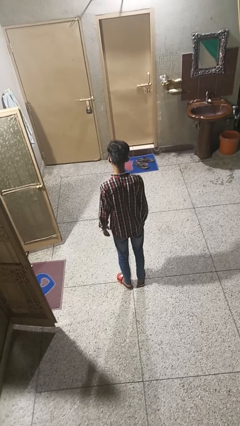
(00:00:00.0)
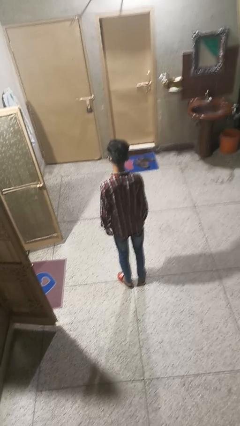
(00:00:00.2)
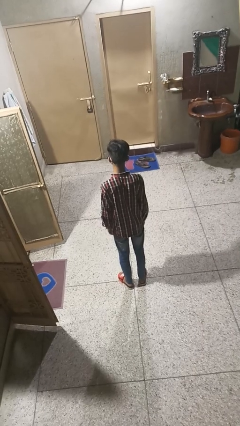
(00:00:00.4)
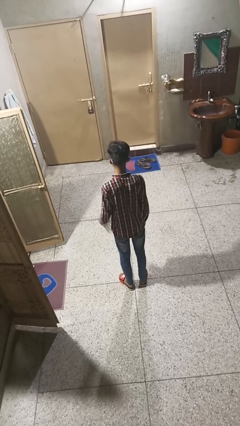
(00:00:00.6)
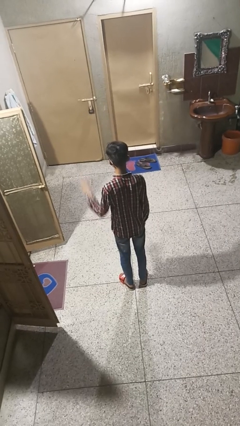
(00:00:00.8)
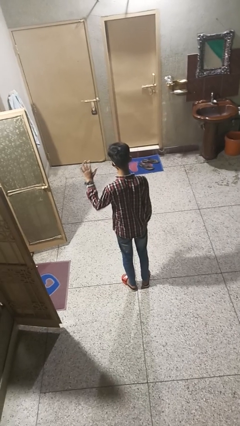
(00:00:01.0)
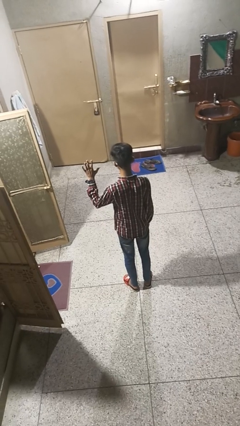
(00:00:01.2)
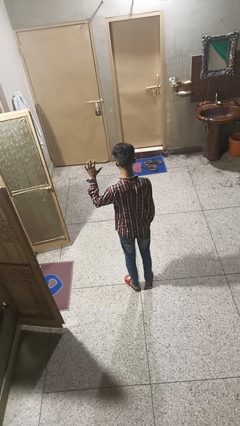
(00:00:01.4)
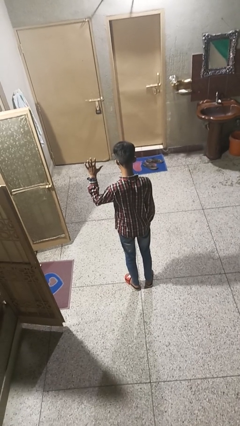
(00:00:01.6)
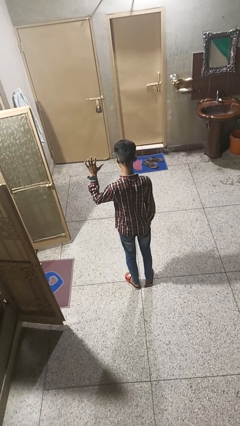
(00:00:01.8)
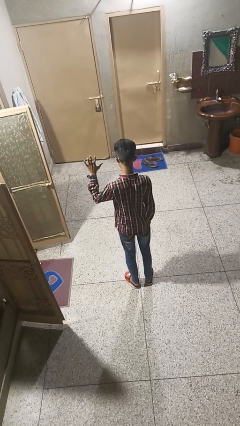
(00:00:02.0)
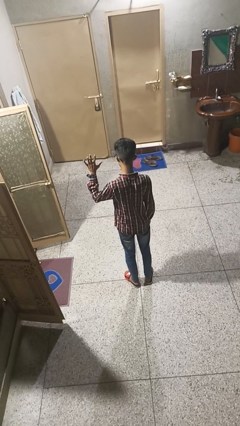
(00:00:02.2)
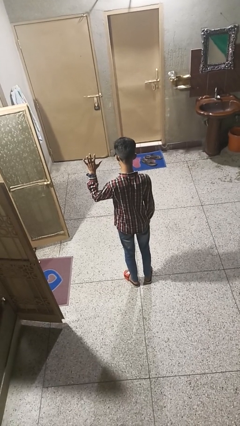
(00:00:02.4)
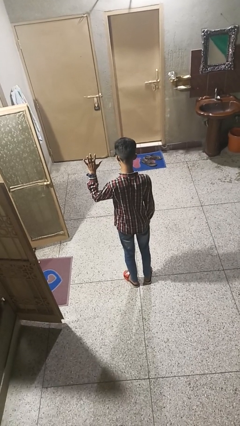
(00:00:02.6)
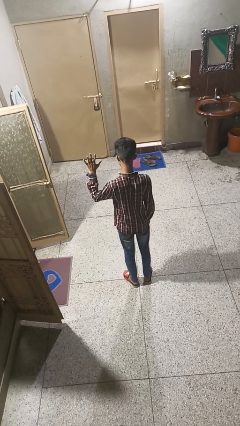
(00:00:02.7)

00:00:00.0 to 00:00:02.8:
person gestures number five

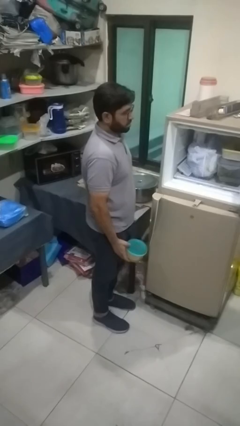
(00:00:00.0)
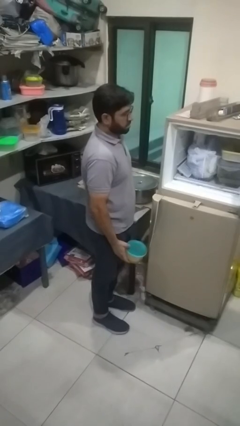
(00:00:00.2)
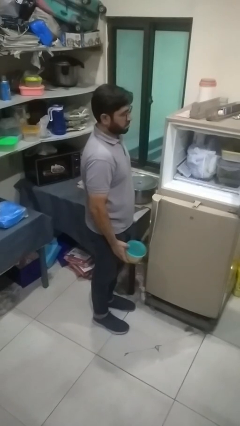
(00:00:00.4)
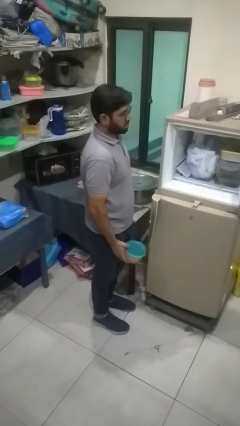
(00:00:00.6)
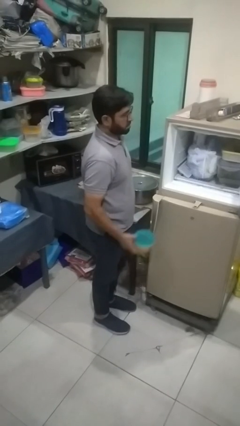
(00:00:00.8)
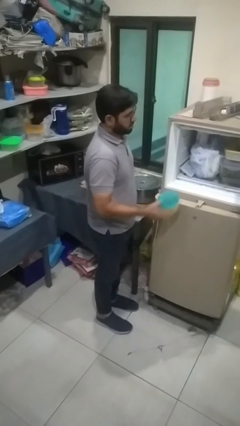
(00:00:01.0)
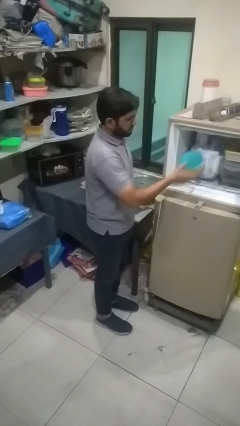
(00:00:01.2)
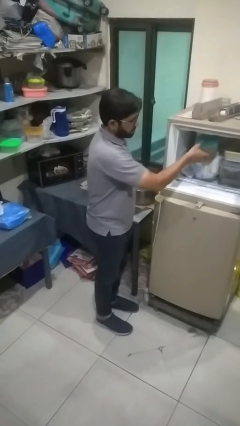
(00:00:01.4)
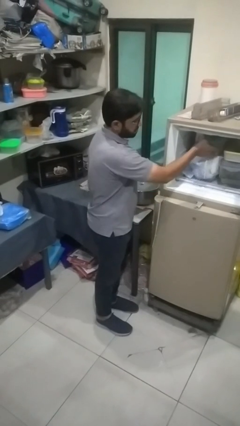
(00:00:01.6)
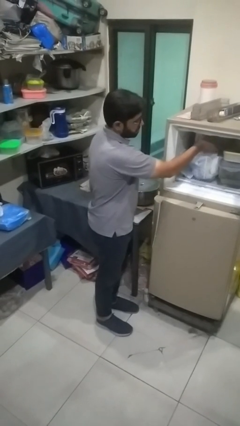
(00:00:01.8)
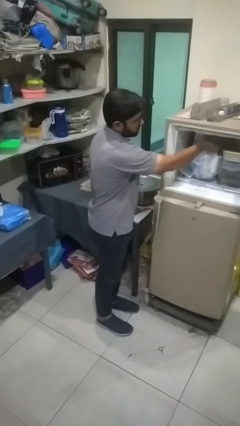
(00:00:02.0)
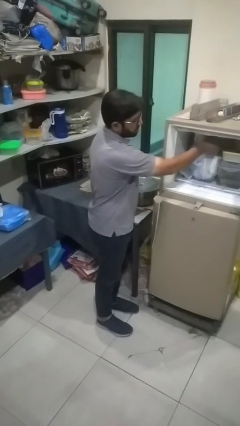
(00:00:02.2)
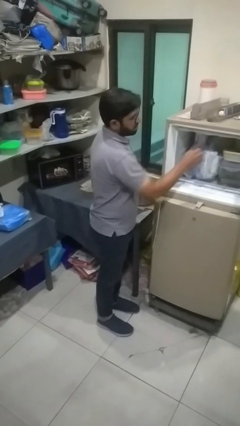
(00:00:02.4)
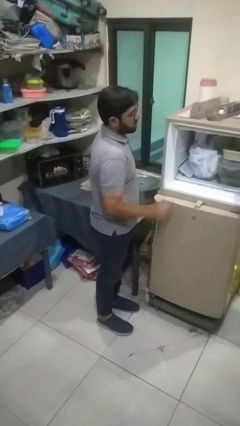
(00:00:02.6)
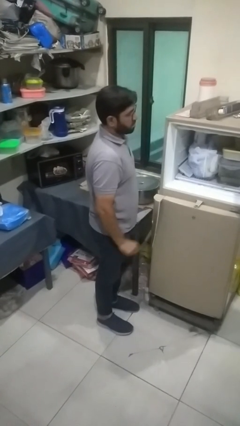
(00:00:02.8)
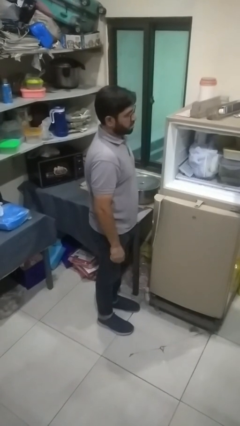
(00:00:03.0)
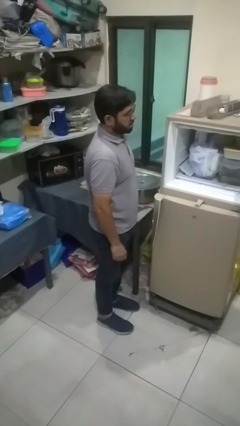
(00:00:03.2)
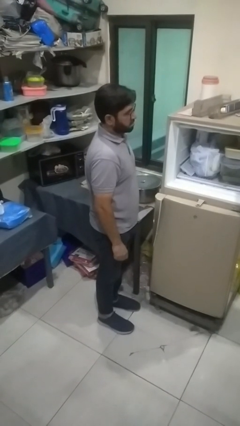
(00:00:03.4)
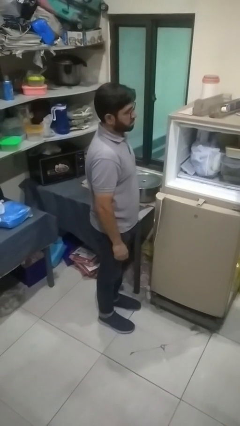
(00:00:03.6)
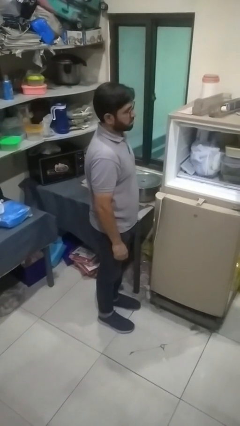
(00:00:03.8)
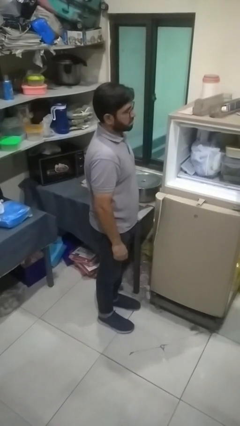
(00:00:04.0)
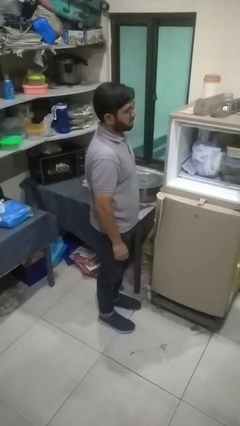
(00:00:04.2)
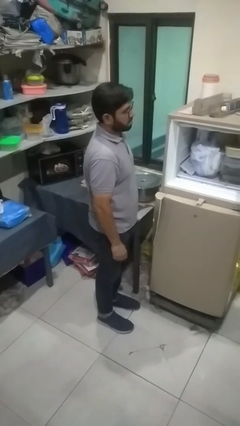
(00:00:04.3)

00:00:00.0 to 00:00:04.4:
person puts object into refrigerator

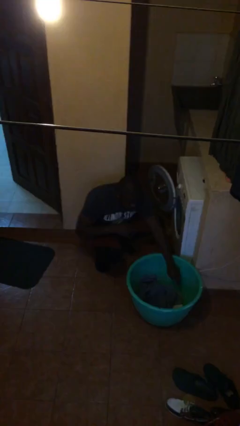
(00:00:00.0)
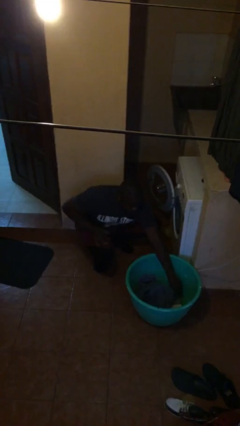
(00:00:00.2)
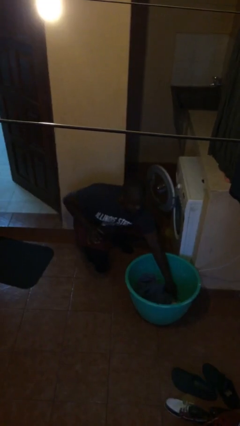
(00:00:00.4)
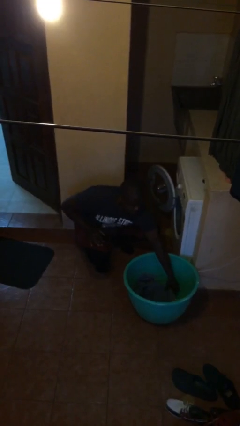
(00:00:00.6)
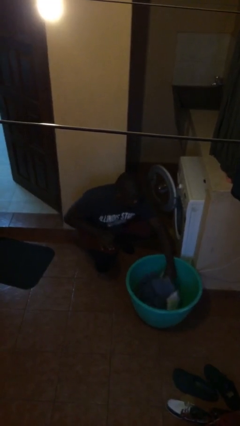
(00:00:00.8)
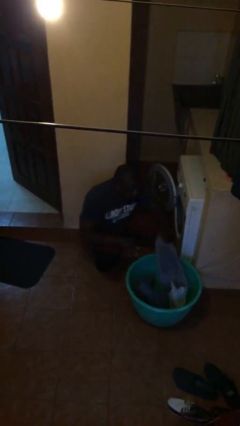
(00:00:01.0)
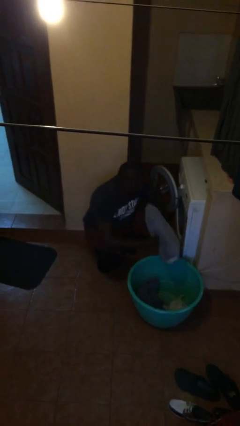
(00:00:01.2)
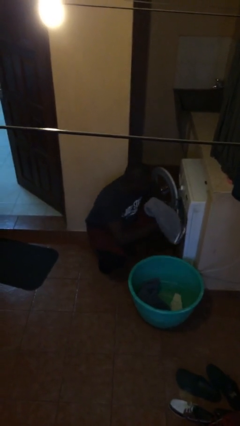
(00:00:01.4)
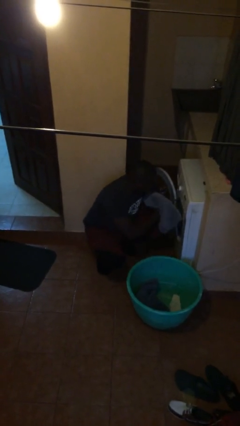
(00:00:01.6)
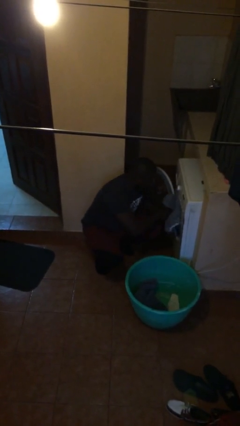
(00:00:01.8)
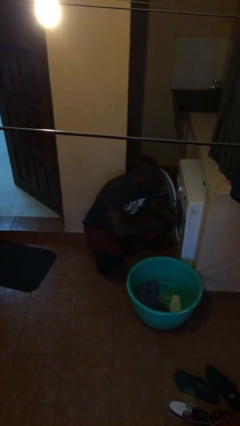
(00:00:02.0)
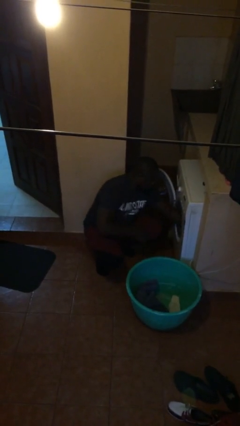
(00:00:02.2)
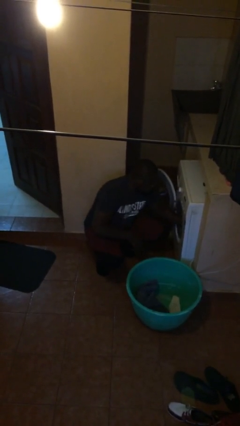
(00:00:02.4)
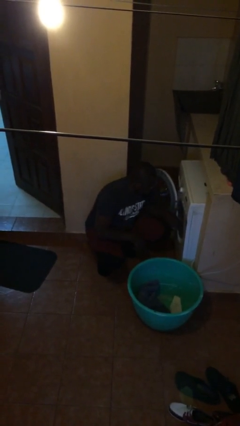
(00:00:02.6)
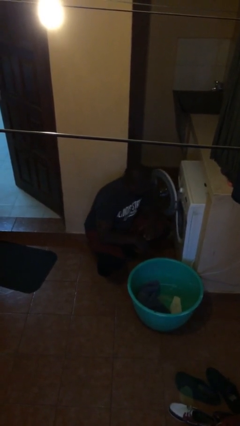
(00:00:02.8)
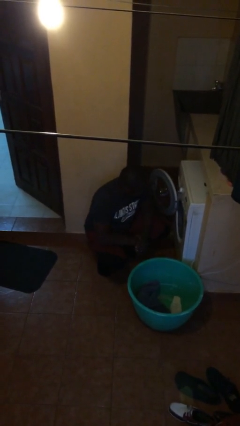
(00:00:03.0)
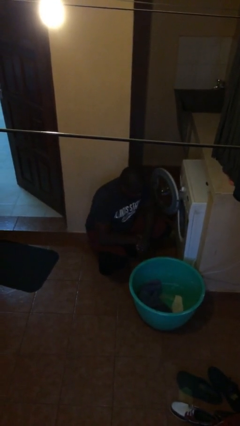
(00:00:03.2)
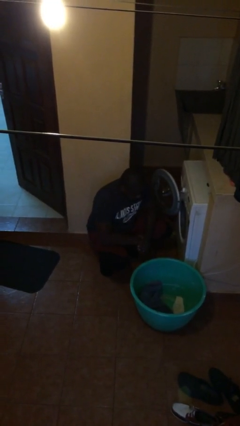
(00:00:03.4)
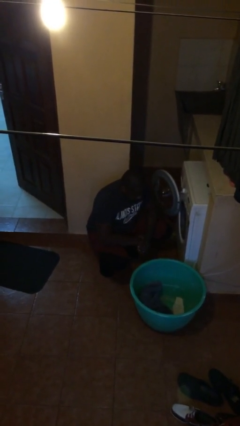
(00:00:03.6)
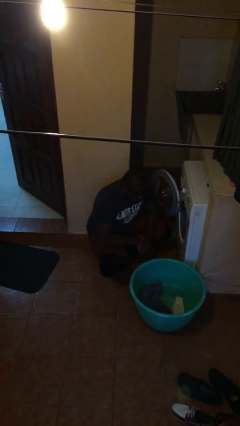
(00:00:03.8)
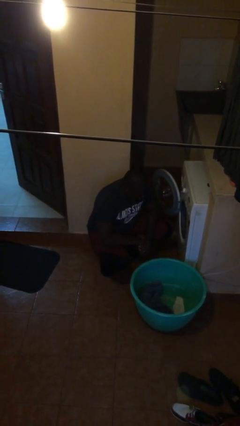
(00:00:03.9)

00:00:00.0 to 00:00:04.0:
person loads clotheswasher

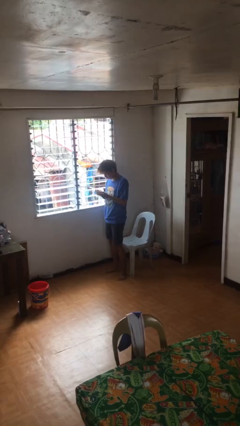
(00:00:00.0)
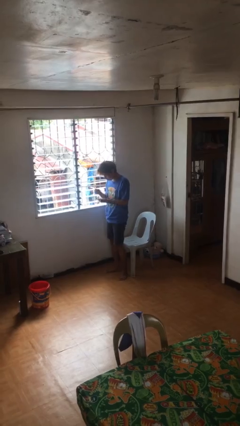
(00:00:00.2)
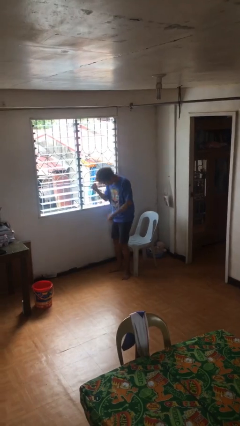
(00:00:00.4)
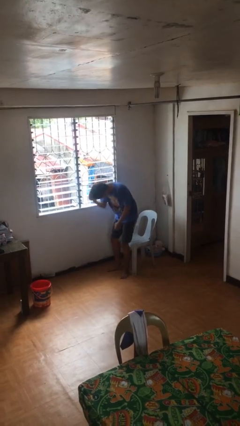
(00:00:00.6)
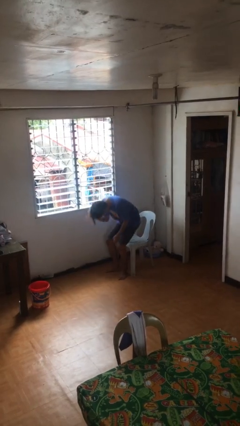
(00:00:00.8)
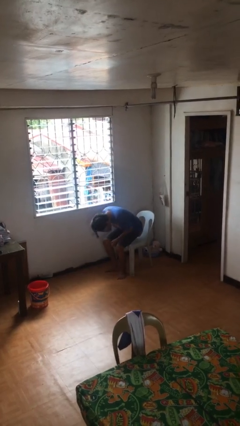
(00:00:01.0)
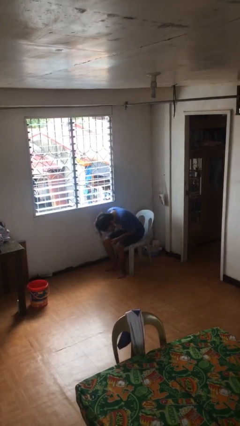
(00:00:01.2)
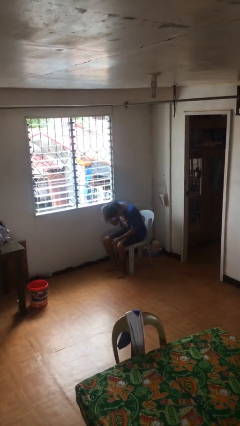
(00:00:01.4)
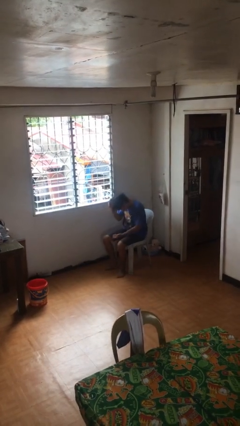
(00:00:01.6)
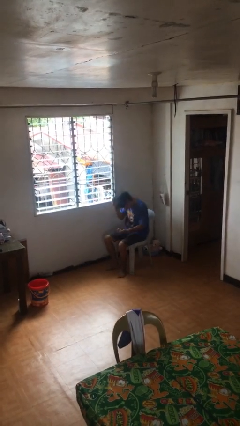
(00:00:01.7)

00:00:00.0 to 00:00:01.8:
person sits down

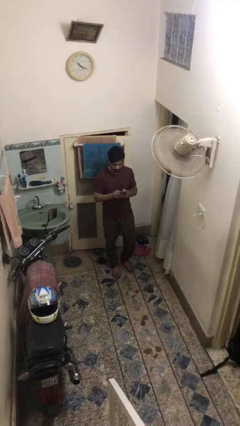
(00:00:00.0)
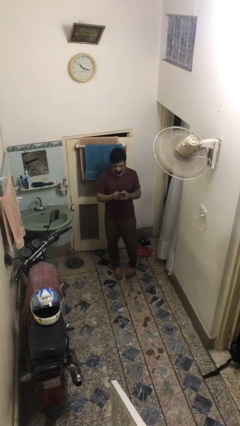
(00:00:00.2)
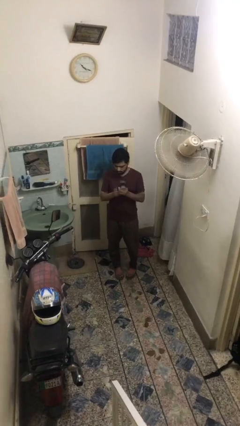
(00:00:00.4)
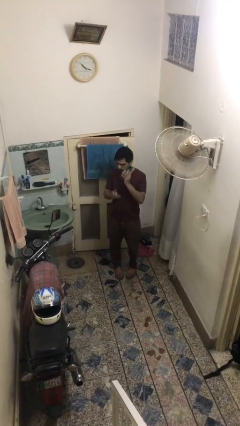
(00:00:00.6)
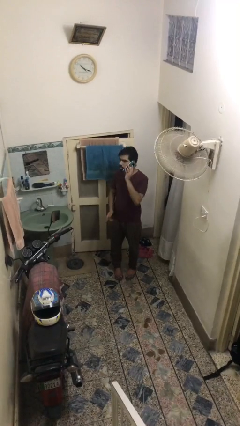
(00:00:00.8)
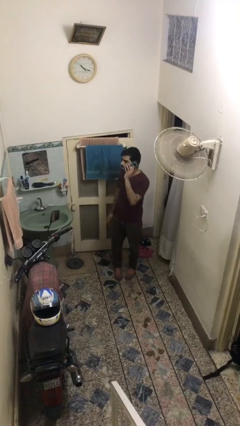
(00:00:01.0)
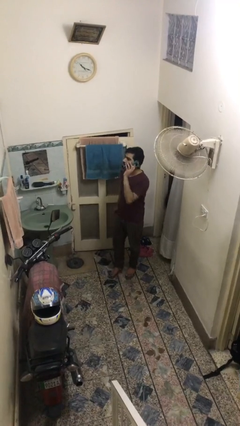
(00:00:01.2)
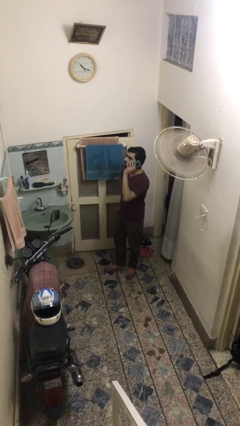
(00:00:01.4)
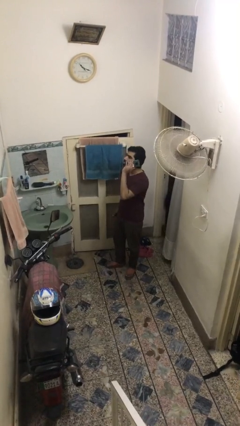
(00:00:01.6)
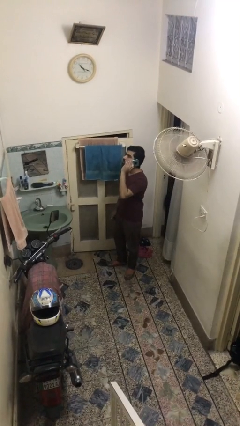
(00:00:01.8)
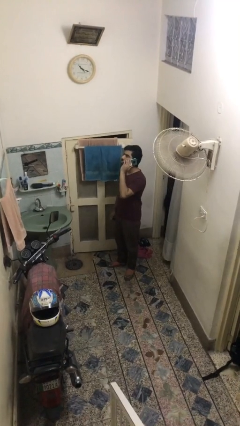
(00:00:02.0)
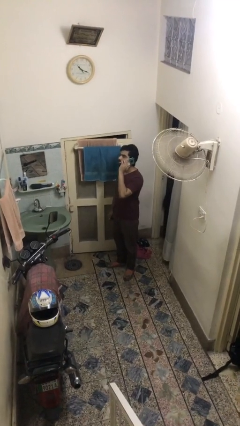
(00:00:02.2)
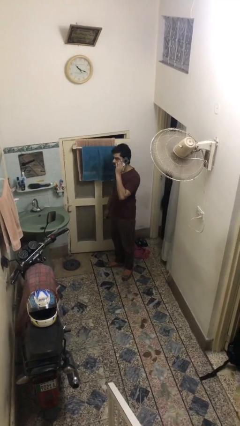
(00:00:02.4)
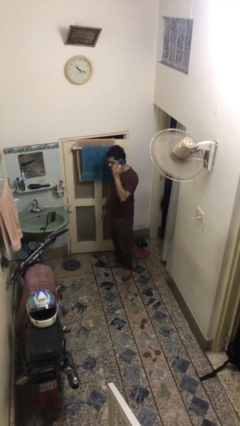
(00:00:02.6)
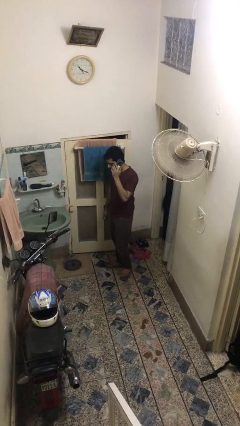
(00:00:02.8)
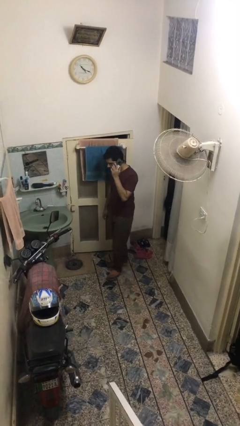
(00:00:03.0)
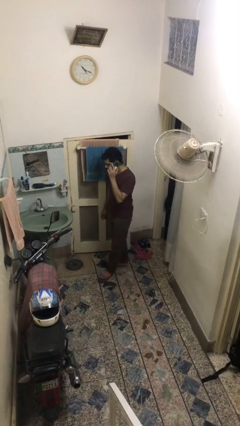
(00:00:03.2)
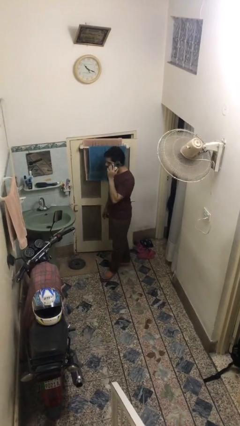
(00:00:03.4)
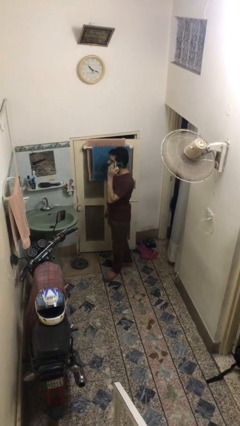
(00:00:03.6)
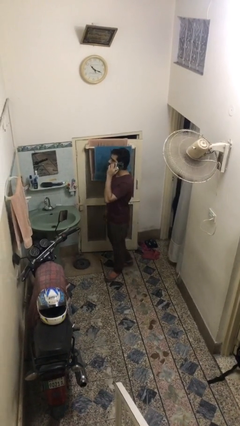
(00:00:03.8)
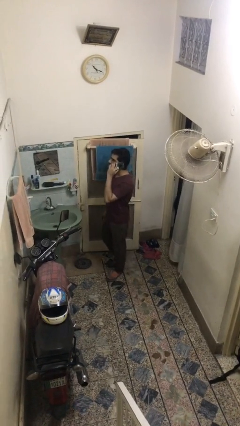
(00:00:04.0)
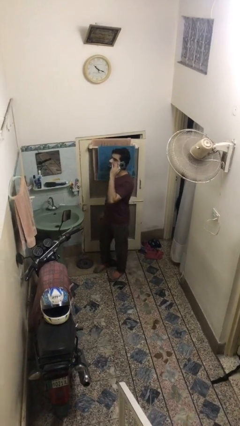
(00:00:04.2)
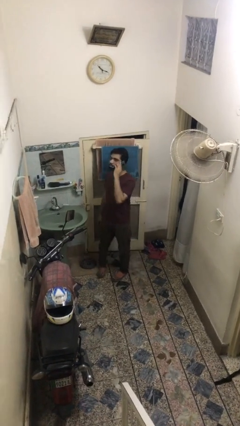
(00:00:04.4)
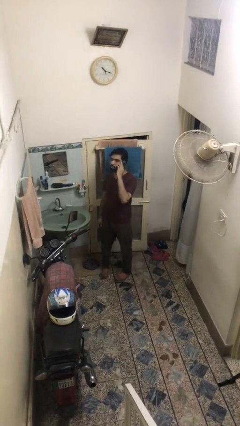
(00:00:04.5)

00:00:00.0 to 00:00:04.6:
person talks on phone
